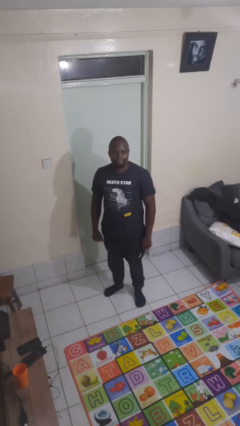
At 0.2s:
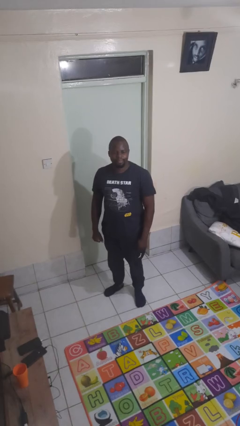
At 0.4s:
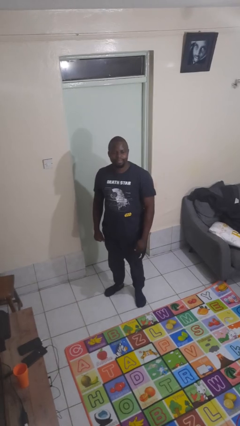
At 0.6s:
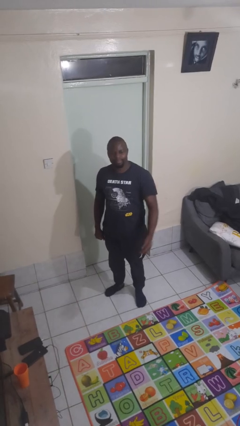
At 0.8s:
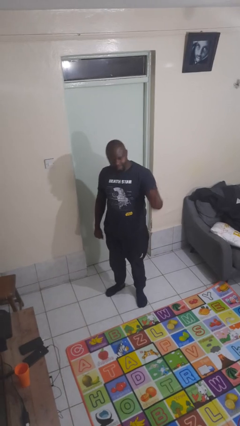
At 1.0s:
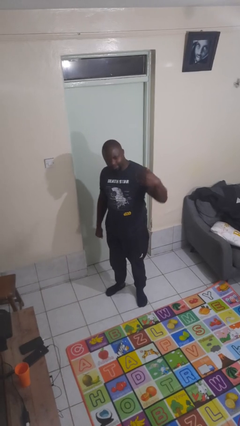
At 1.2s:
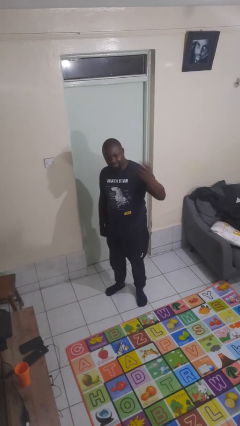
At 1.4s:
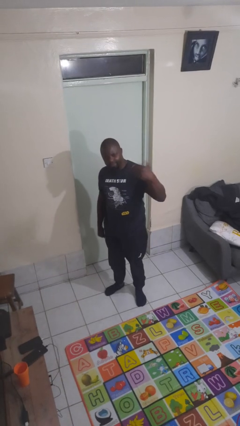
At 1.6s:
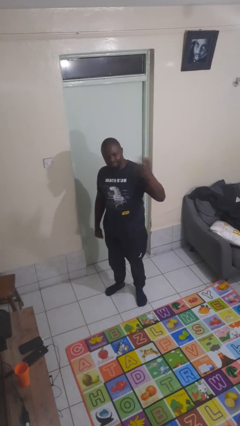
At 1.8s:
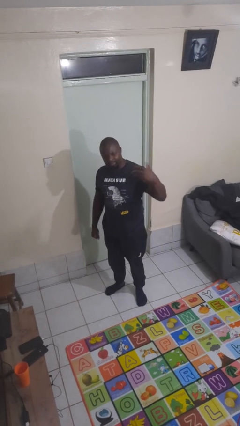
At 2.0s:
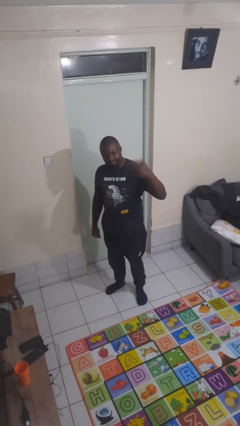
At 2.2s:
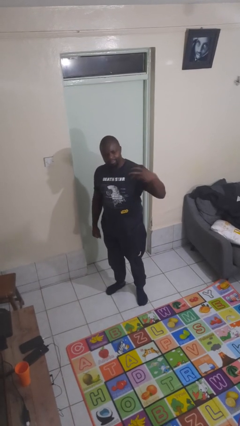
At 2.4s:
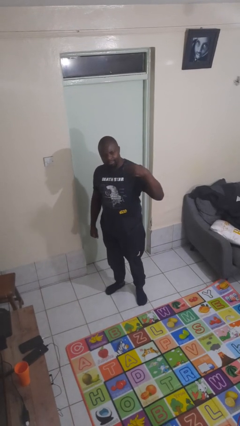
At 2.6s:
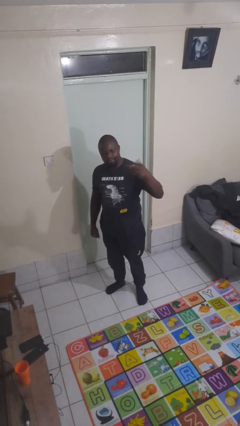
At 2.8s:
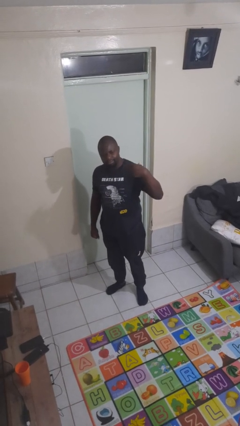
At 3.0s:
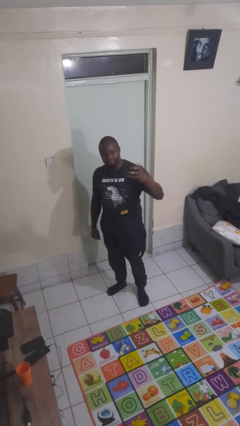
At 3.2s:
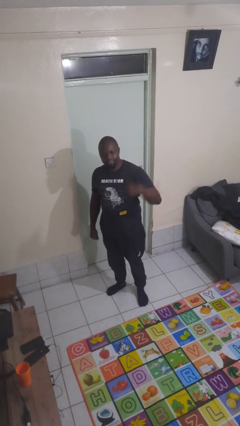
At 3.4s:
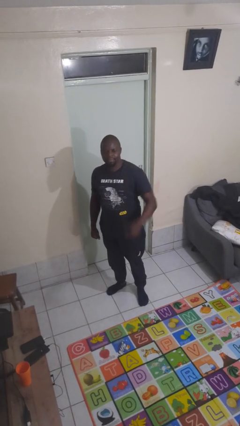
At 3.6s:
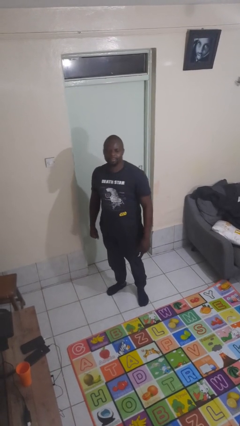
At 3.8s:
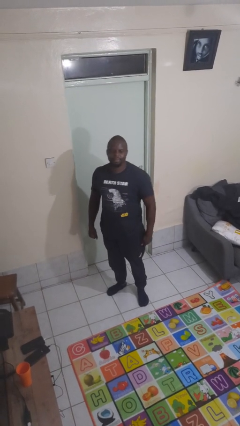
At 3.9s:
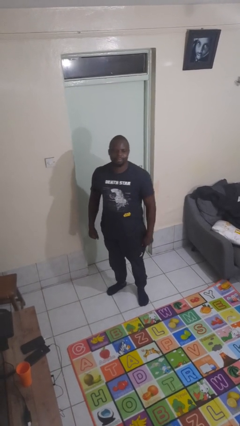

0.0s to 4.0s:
person gestures come here

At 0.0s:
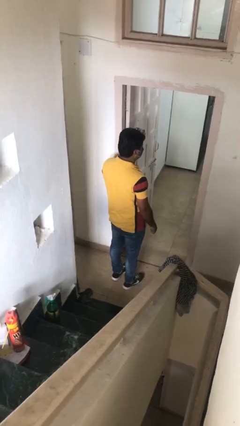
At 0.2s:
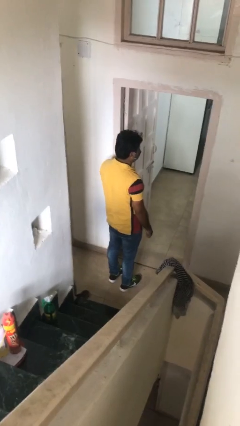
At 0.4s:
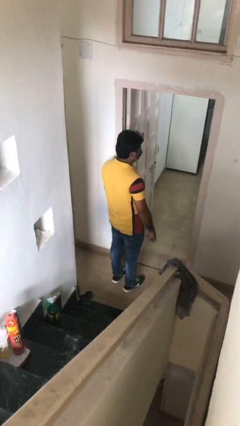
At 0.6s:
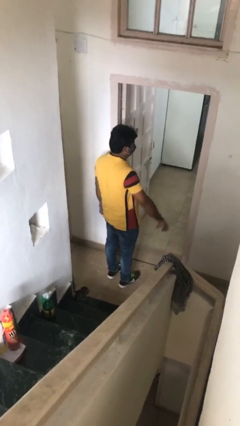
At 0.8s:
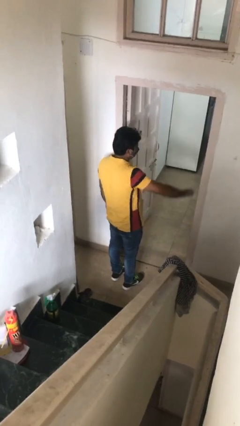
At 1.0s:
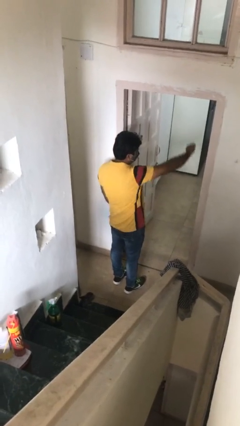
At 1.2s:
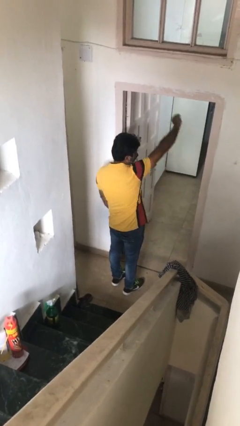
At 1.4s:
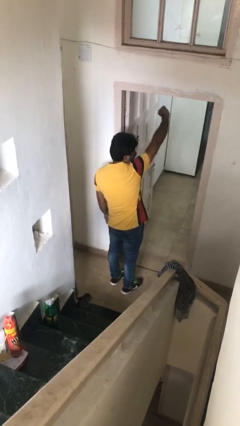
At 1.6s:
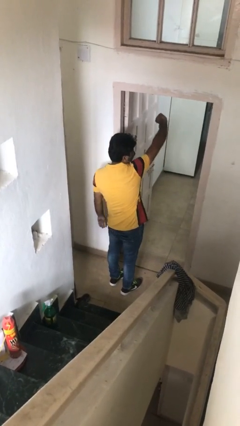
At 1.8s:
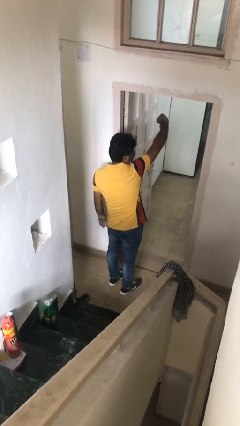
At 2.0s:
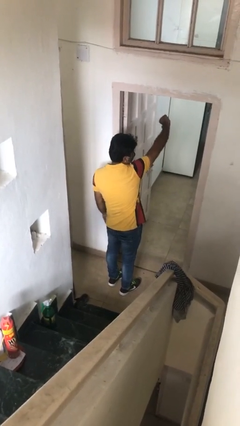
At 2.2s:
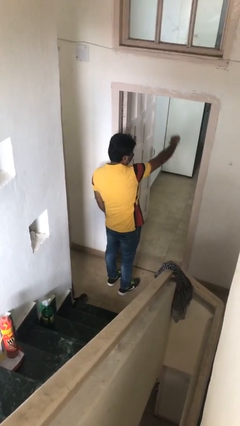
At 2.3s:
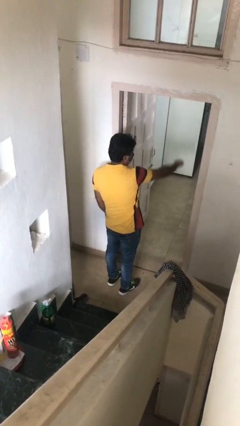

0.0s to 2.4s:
person gestures thumbs down

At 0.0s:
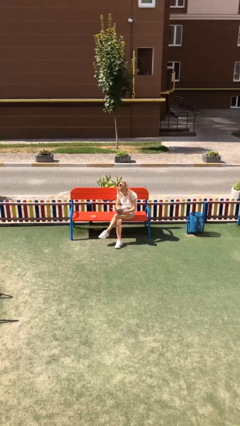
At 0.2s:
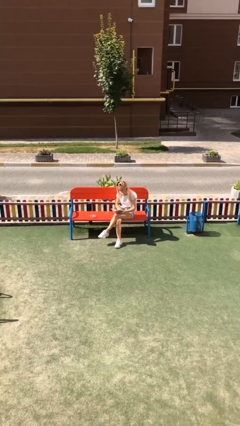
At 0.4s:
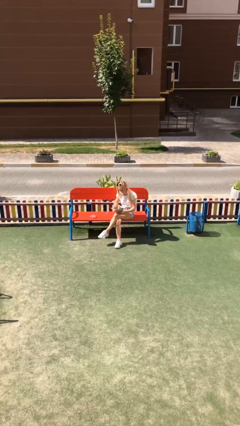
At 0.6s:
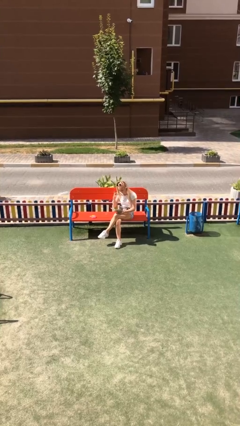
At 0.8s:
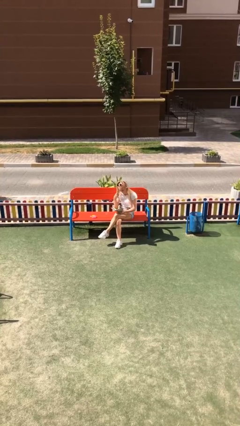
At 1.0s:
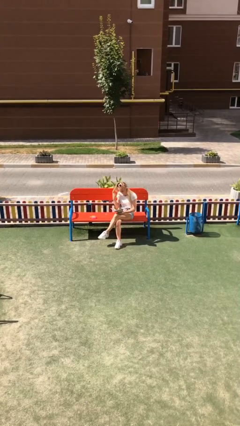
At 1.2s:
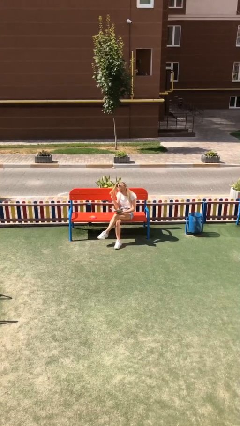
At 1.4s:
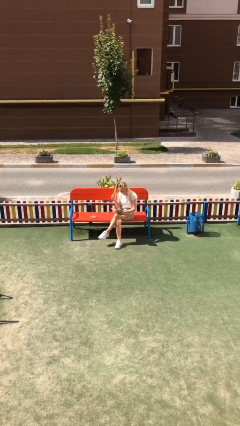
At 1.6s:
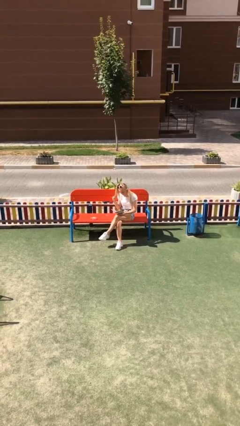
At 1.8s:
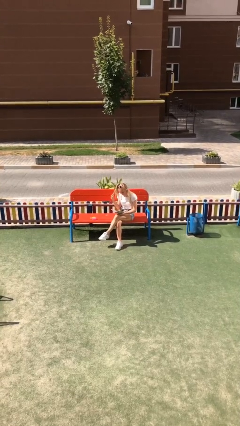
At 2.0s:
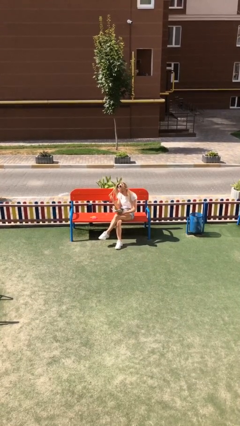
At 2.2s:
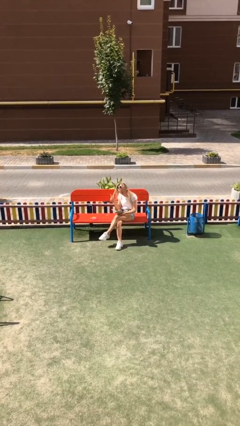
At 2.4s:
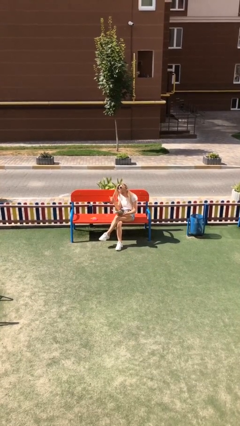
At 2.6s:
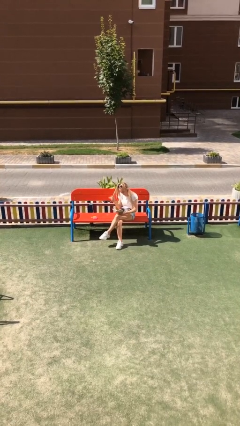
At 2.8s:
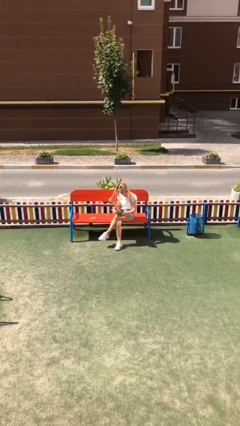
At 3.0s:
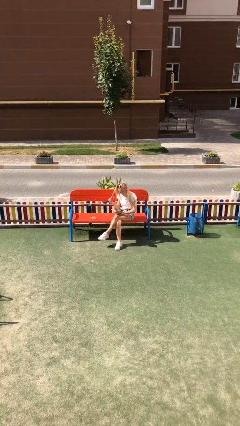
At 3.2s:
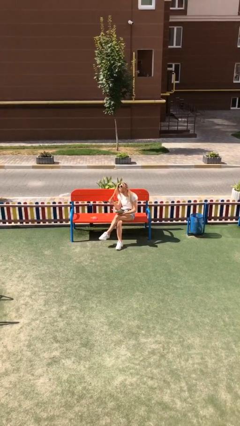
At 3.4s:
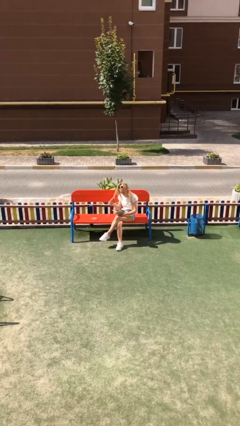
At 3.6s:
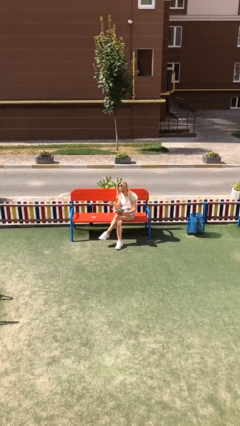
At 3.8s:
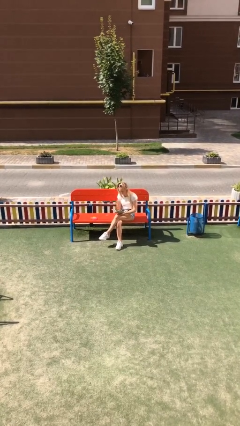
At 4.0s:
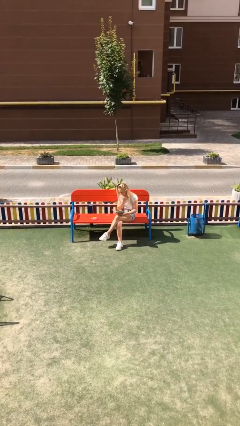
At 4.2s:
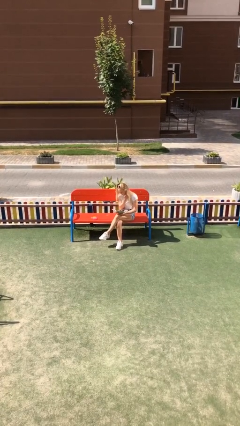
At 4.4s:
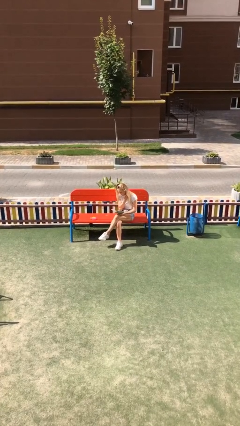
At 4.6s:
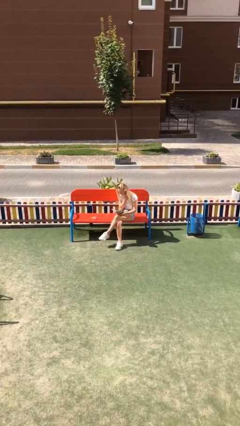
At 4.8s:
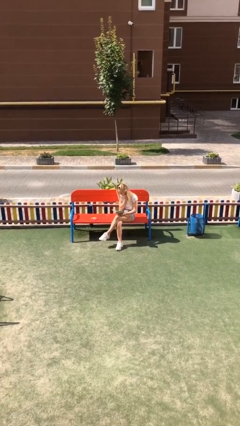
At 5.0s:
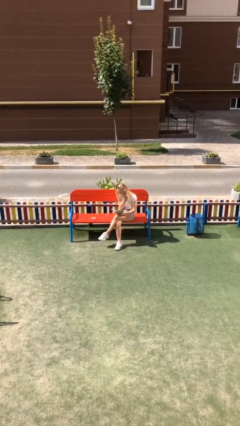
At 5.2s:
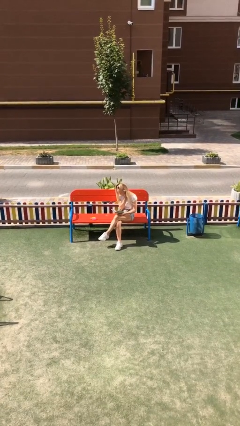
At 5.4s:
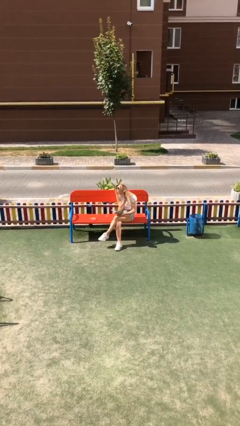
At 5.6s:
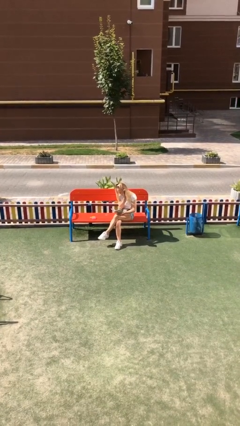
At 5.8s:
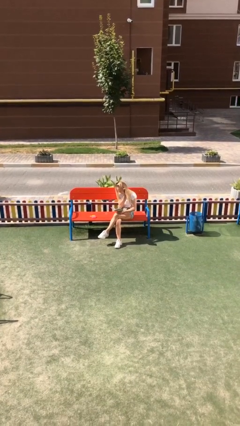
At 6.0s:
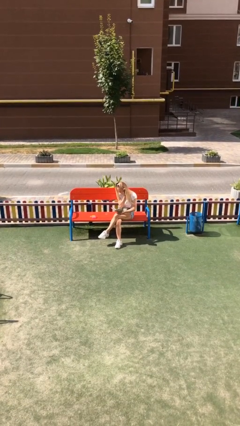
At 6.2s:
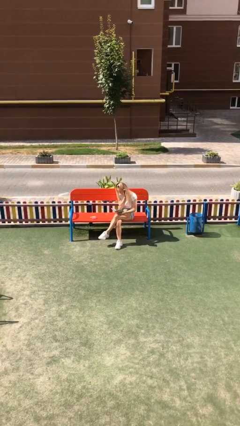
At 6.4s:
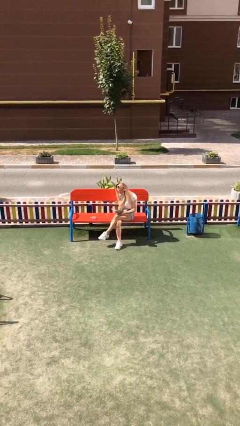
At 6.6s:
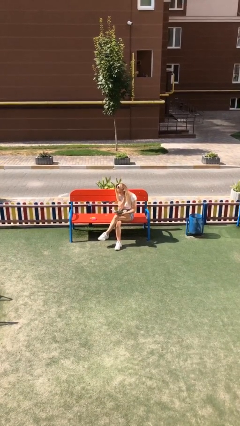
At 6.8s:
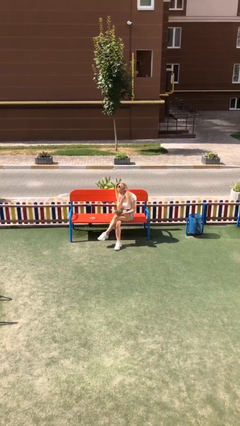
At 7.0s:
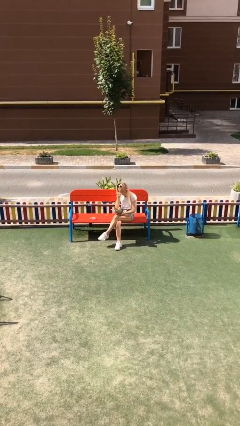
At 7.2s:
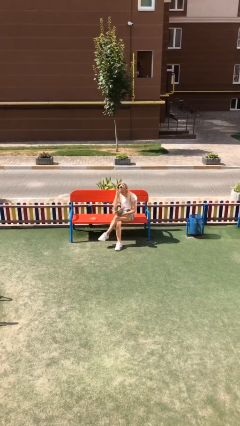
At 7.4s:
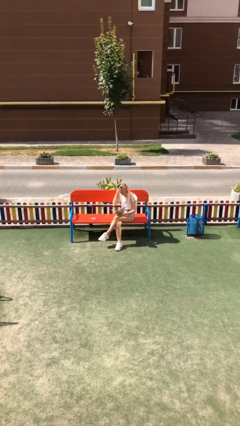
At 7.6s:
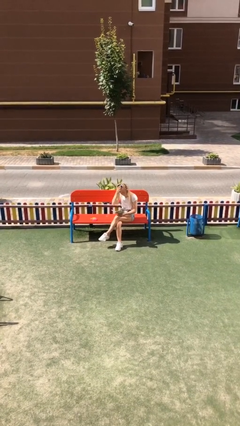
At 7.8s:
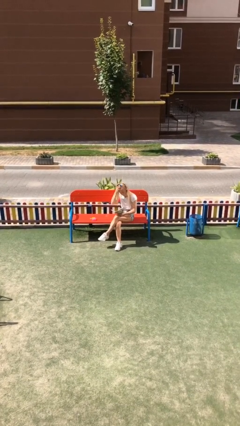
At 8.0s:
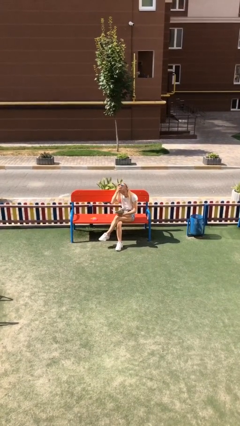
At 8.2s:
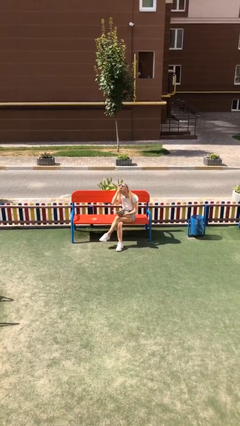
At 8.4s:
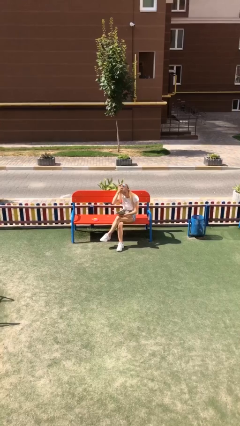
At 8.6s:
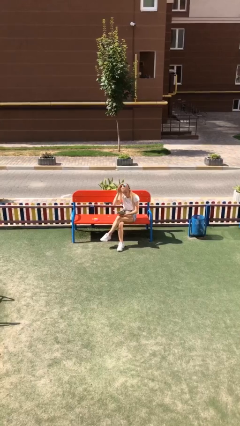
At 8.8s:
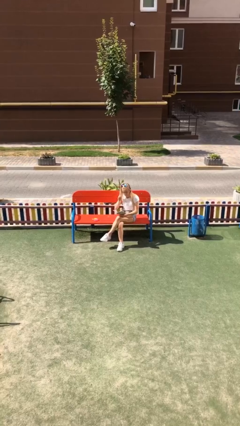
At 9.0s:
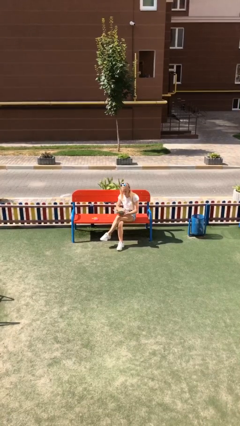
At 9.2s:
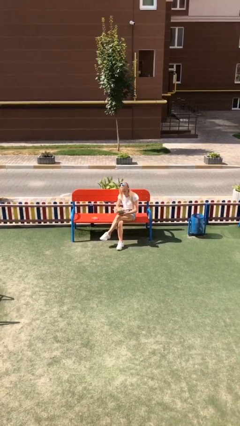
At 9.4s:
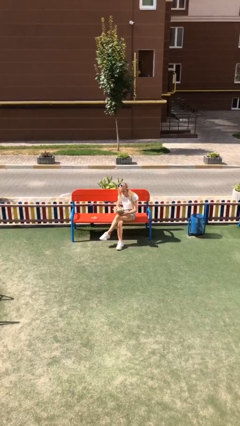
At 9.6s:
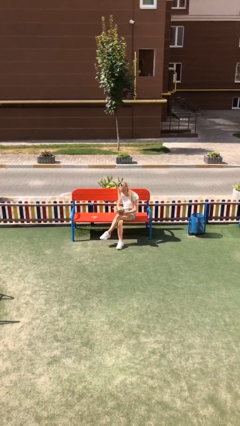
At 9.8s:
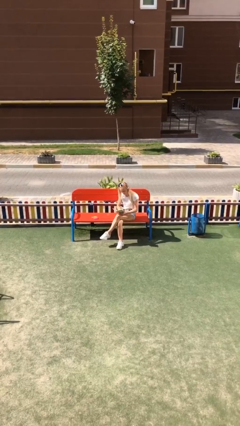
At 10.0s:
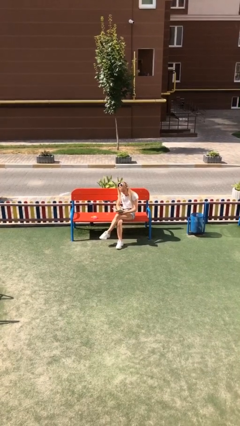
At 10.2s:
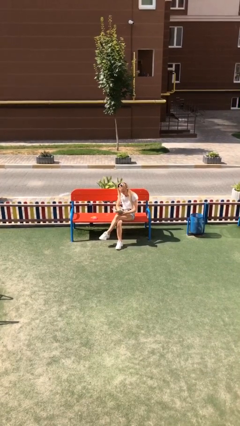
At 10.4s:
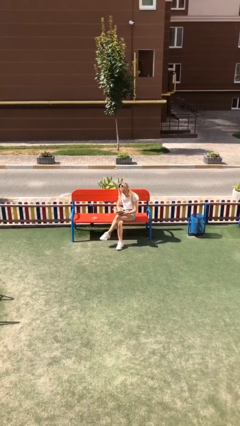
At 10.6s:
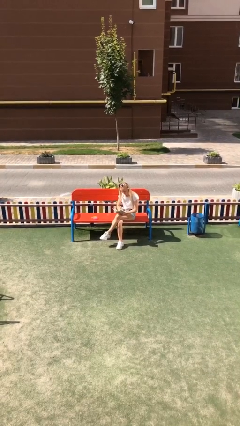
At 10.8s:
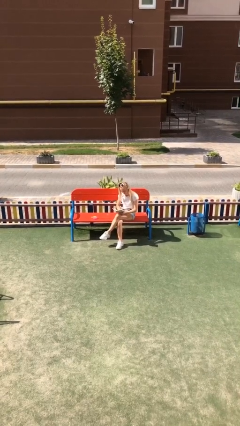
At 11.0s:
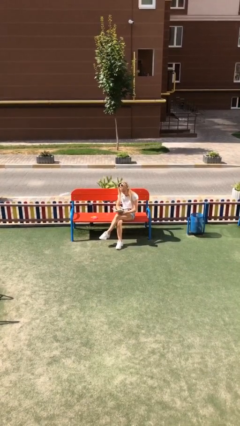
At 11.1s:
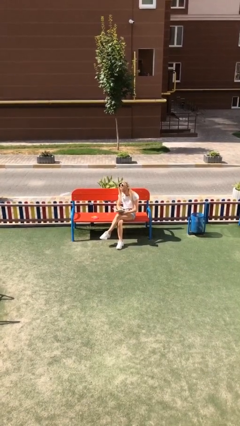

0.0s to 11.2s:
person reads document
